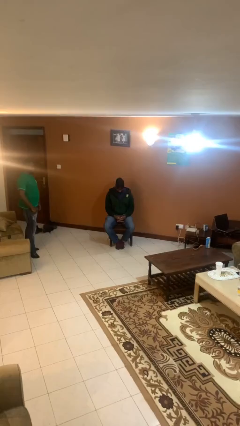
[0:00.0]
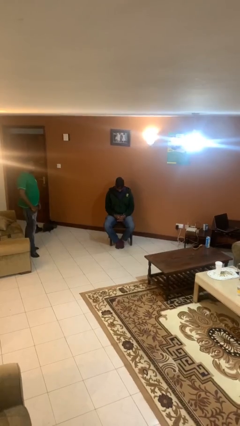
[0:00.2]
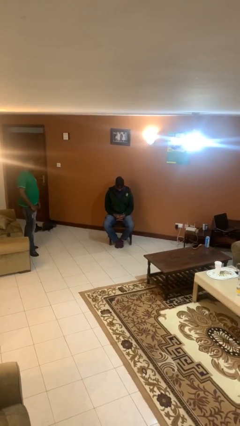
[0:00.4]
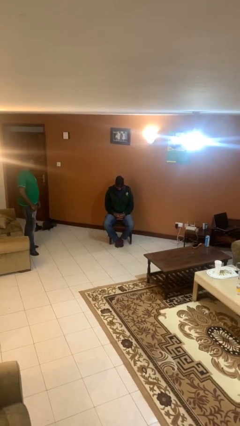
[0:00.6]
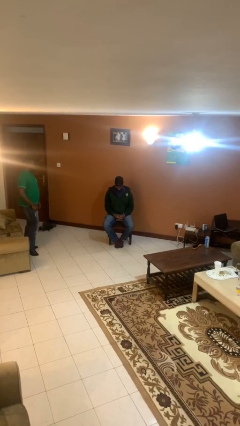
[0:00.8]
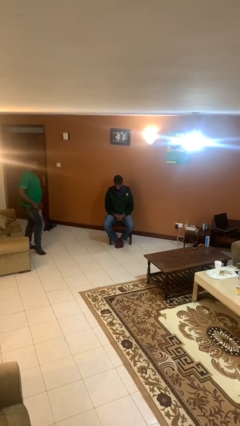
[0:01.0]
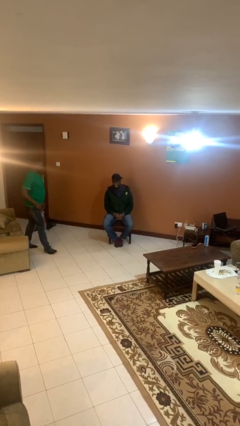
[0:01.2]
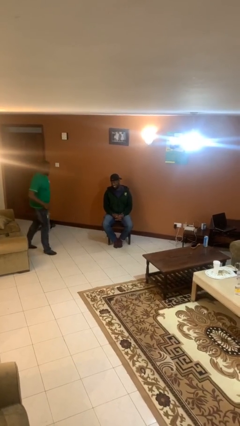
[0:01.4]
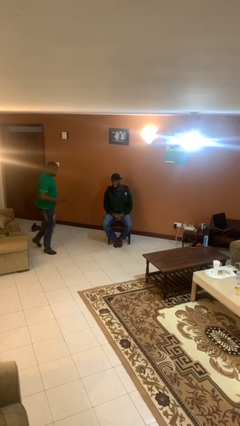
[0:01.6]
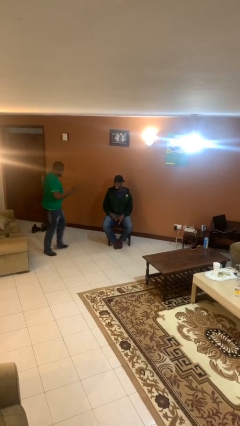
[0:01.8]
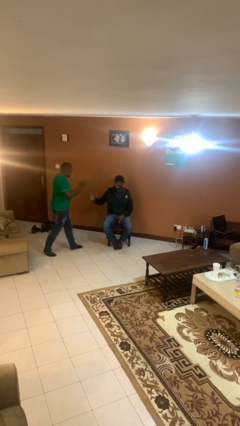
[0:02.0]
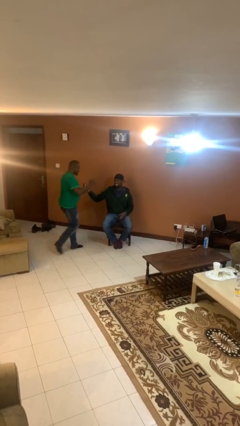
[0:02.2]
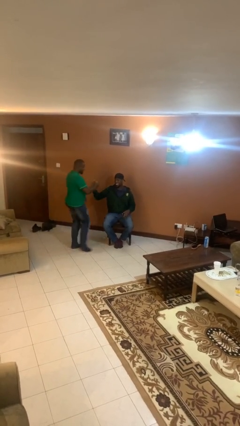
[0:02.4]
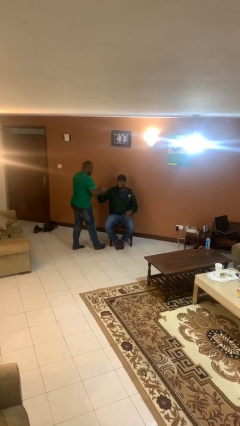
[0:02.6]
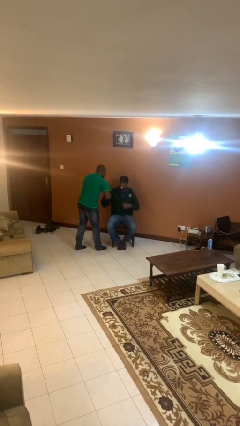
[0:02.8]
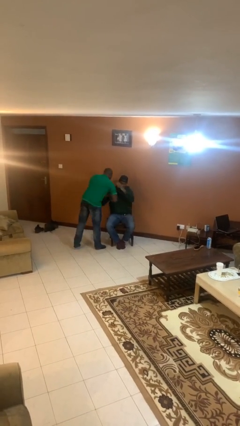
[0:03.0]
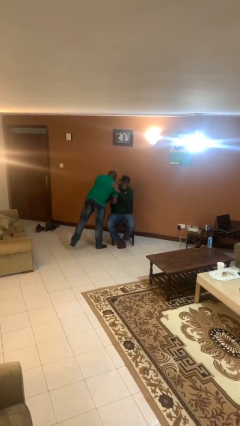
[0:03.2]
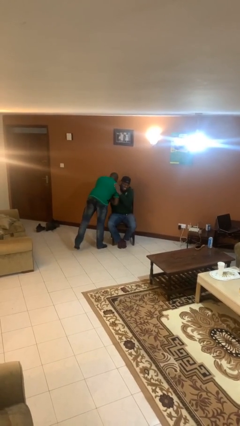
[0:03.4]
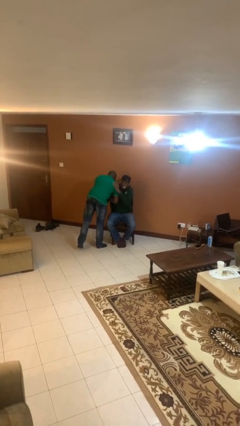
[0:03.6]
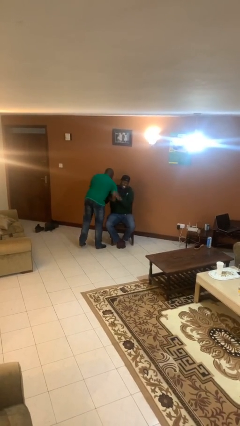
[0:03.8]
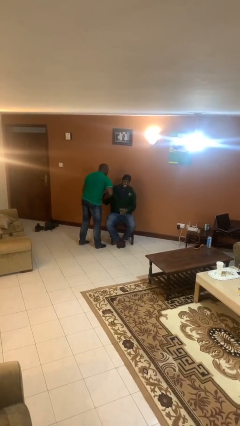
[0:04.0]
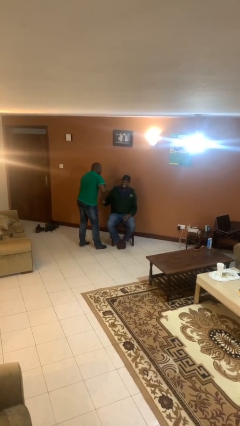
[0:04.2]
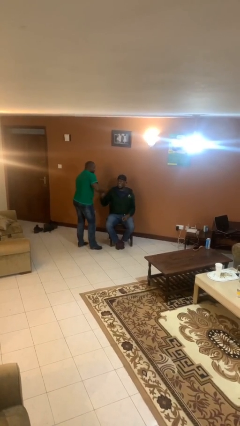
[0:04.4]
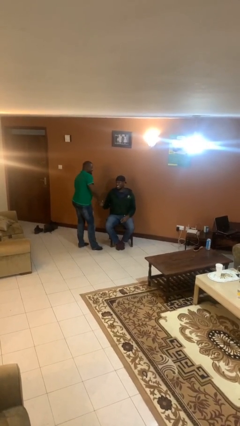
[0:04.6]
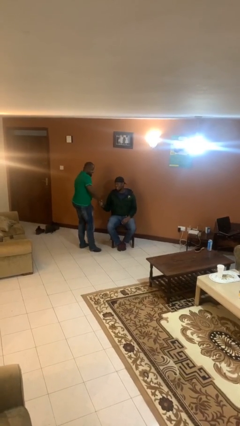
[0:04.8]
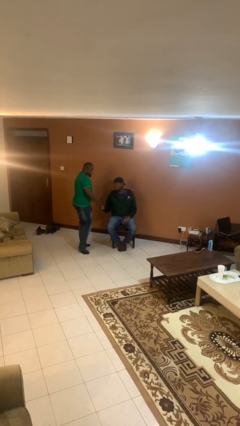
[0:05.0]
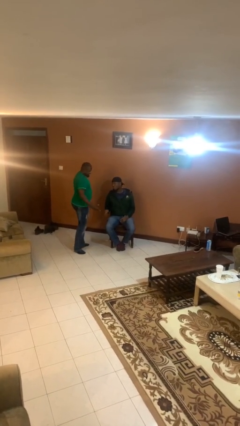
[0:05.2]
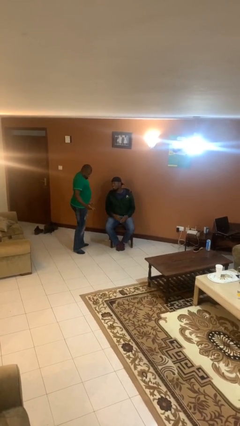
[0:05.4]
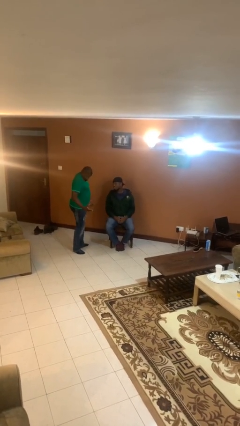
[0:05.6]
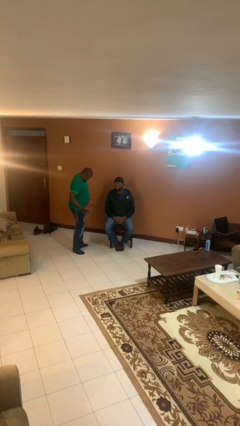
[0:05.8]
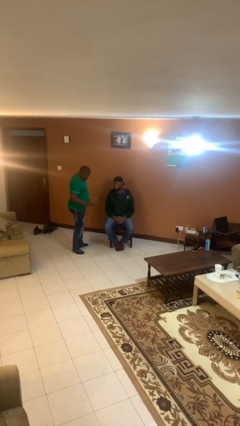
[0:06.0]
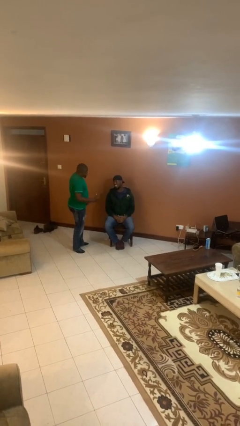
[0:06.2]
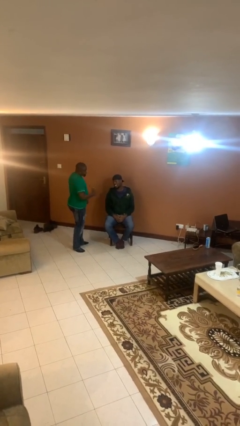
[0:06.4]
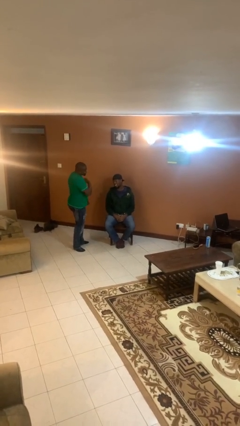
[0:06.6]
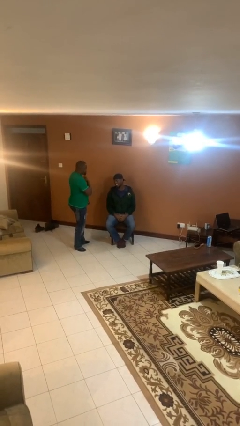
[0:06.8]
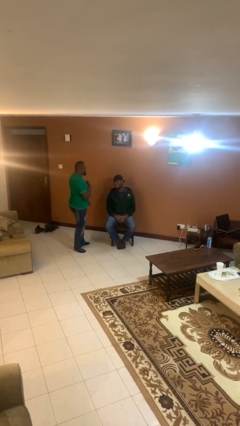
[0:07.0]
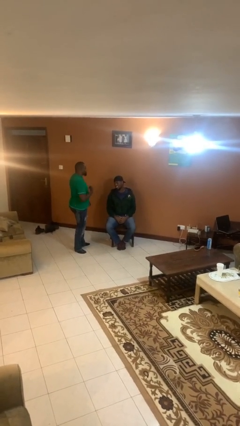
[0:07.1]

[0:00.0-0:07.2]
person embraces person

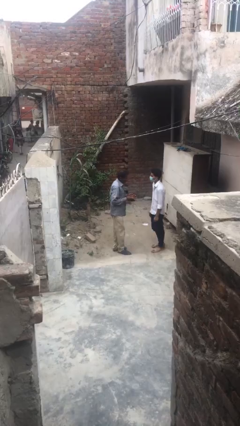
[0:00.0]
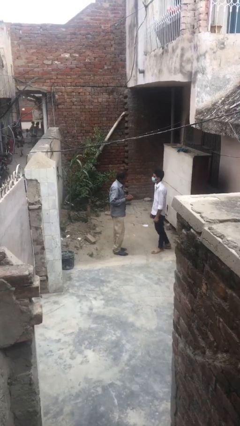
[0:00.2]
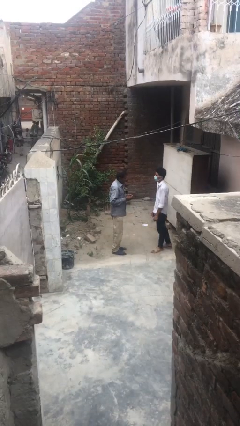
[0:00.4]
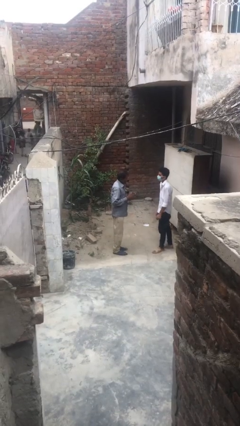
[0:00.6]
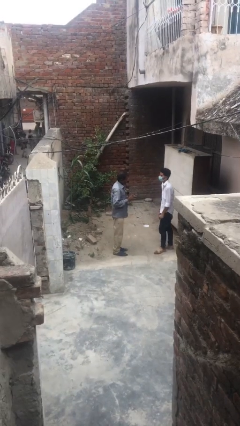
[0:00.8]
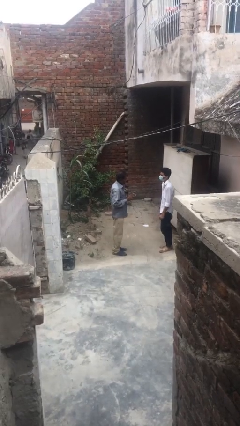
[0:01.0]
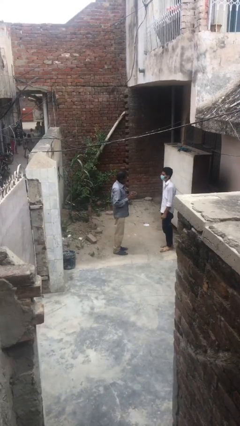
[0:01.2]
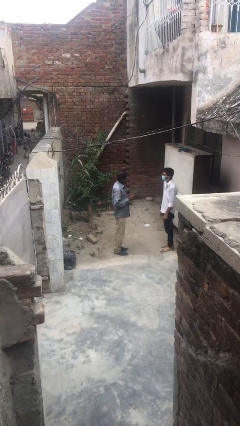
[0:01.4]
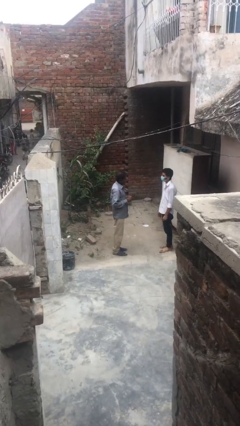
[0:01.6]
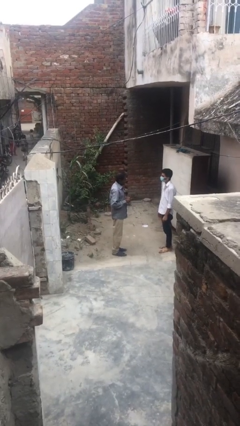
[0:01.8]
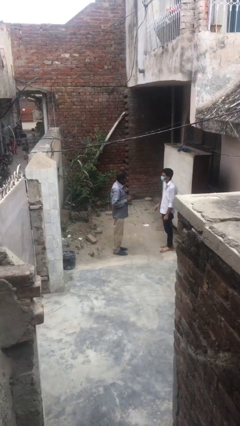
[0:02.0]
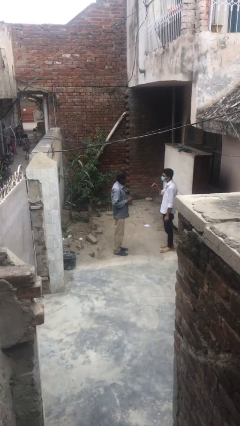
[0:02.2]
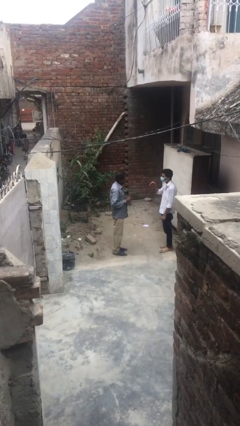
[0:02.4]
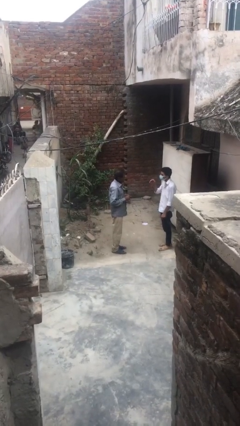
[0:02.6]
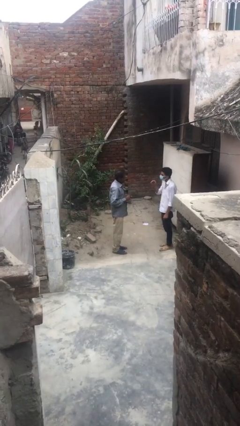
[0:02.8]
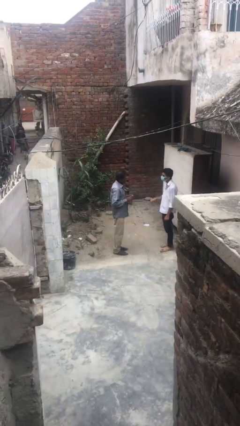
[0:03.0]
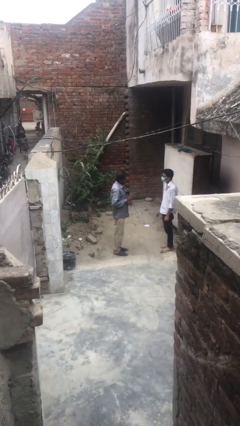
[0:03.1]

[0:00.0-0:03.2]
person talks to person

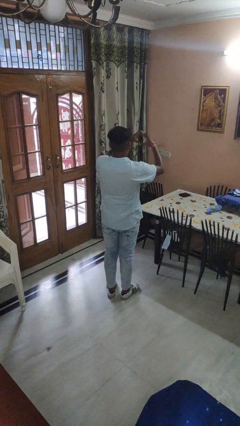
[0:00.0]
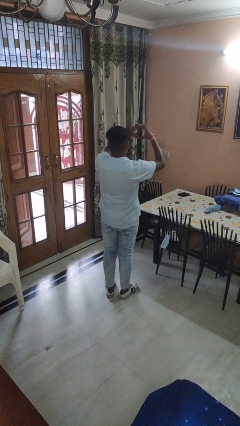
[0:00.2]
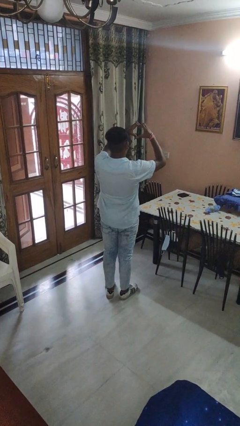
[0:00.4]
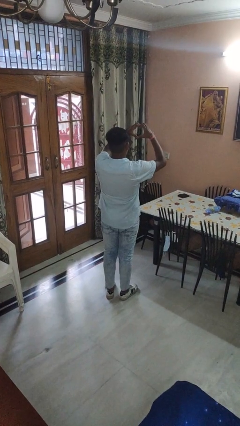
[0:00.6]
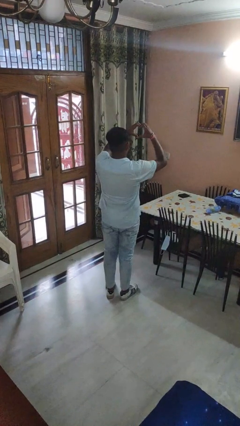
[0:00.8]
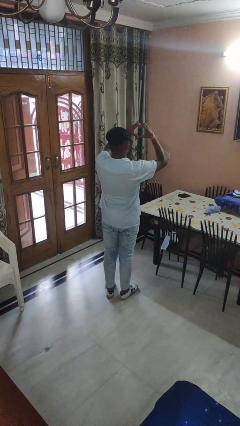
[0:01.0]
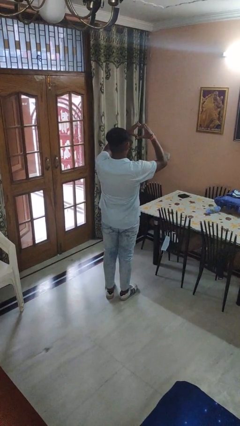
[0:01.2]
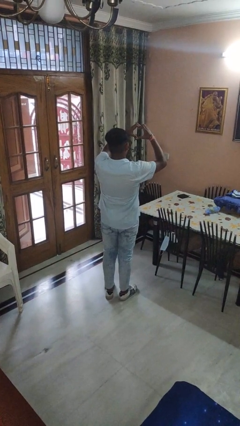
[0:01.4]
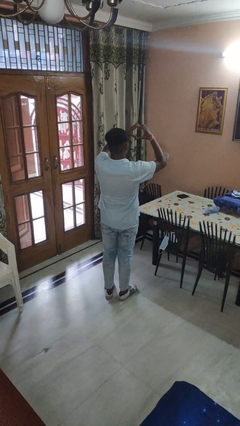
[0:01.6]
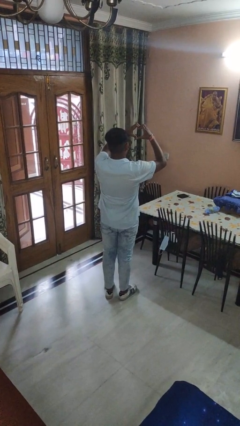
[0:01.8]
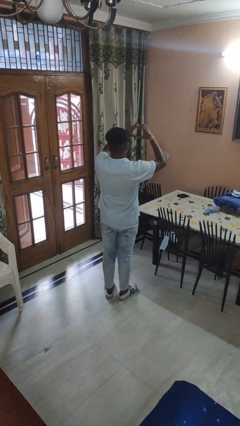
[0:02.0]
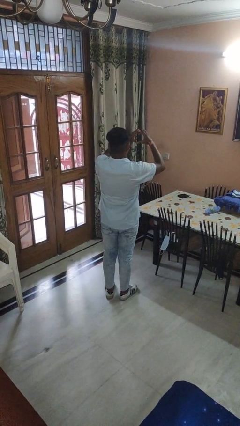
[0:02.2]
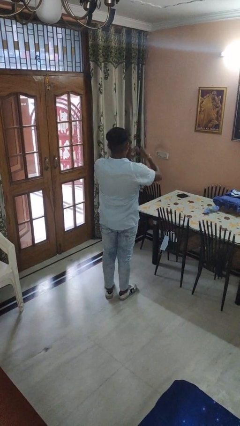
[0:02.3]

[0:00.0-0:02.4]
person gestures heart

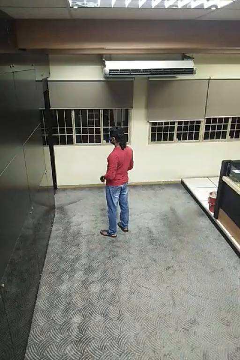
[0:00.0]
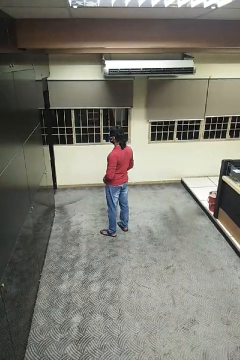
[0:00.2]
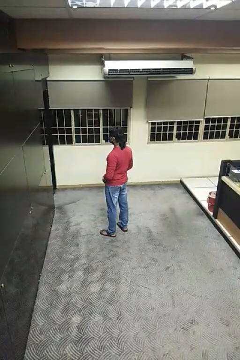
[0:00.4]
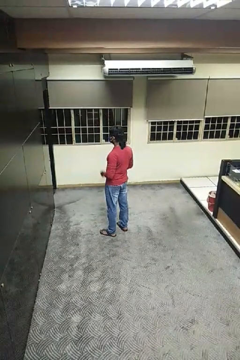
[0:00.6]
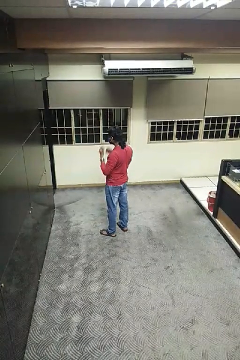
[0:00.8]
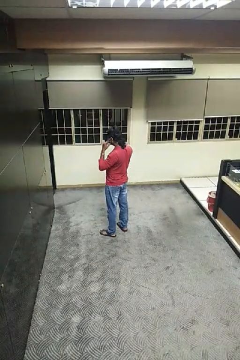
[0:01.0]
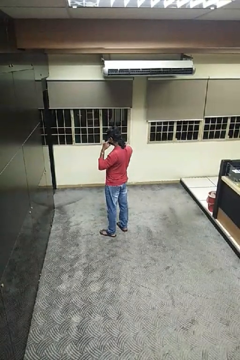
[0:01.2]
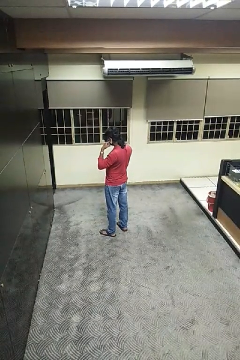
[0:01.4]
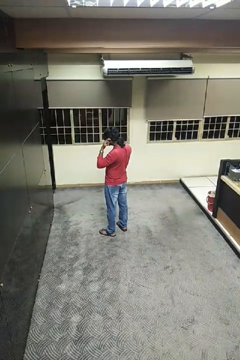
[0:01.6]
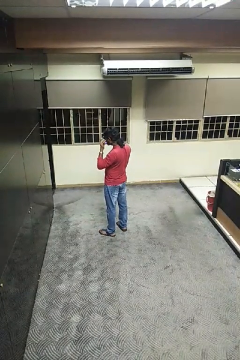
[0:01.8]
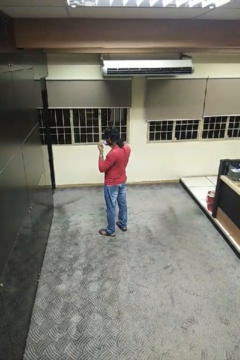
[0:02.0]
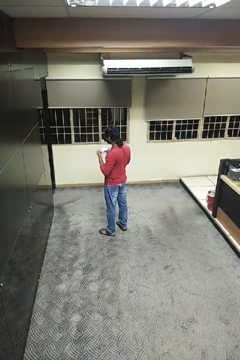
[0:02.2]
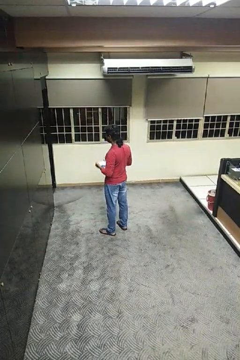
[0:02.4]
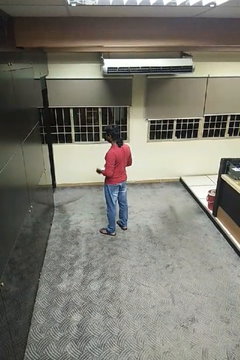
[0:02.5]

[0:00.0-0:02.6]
person takes off facemask

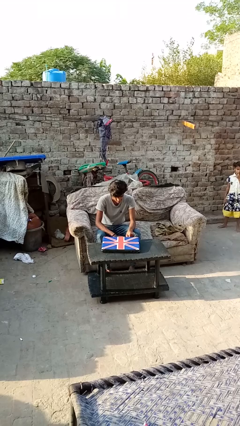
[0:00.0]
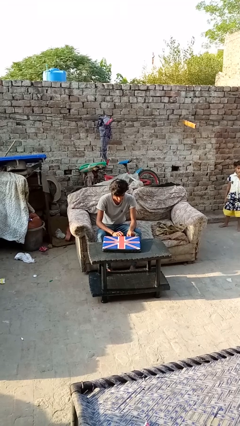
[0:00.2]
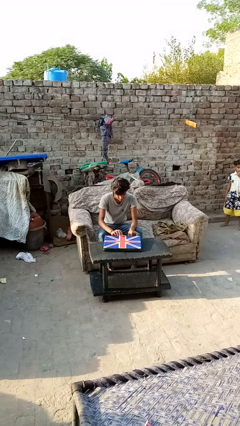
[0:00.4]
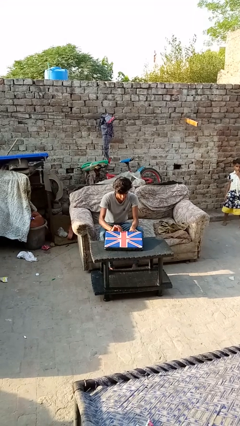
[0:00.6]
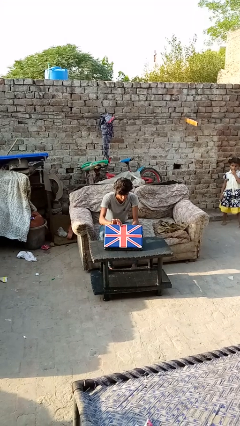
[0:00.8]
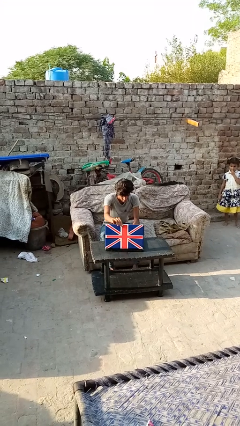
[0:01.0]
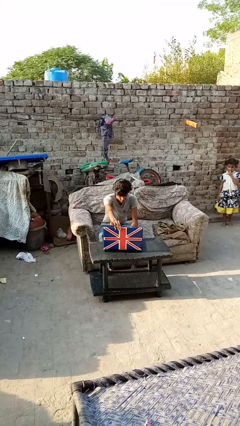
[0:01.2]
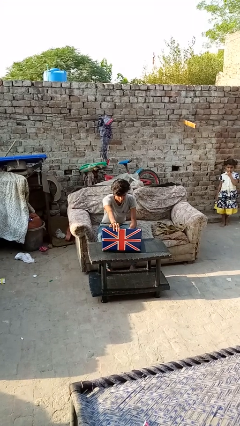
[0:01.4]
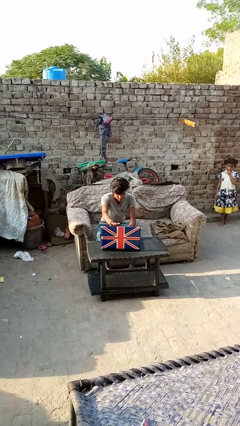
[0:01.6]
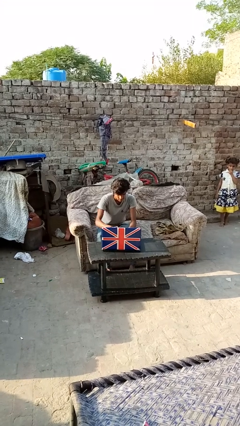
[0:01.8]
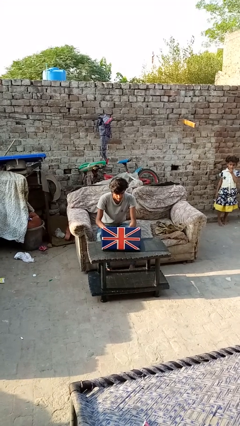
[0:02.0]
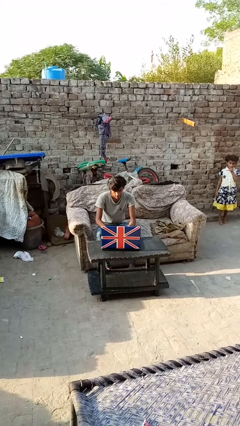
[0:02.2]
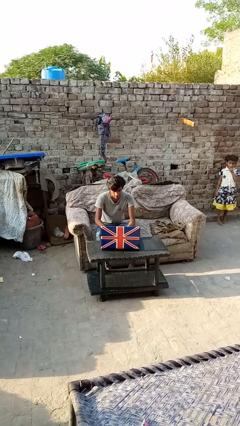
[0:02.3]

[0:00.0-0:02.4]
person opens laptop

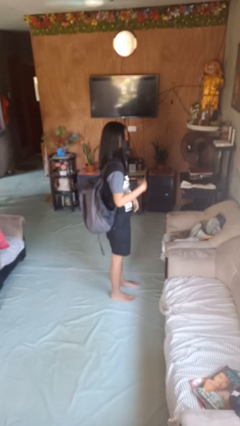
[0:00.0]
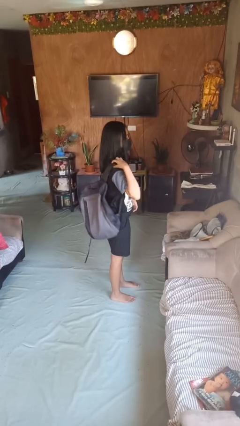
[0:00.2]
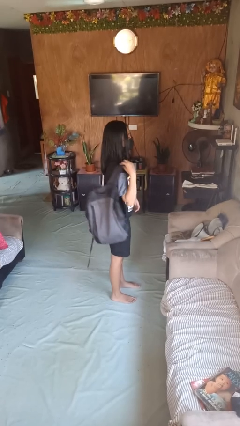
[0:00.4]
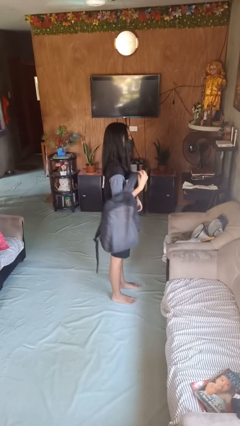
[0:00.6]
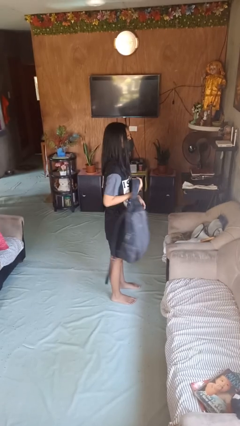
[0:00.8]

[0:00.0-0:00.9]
person takes off backpack
